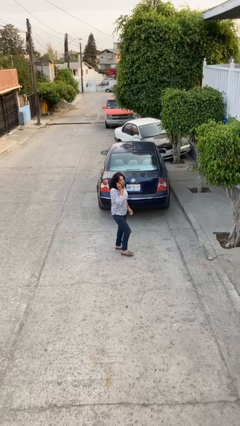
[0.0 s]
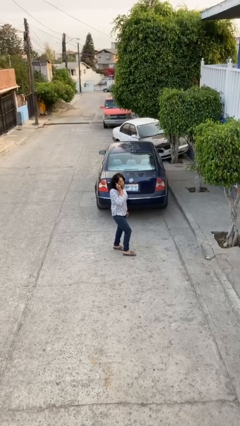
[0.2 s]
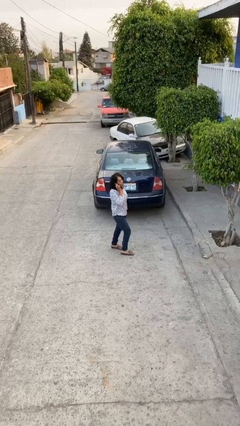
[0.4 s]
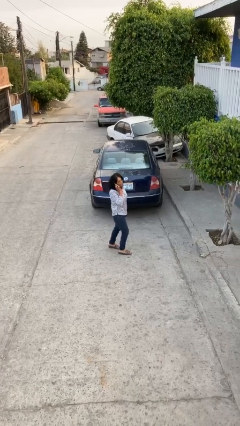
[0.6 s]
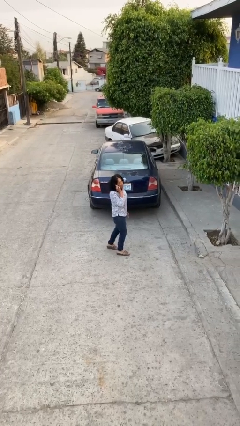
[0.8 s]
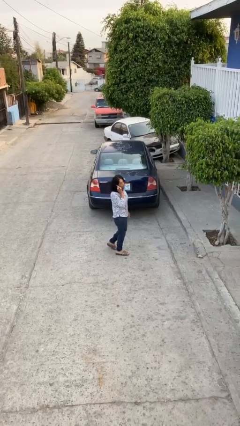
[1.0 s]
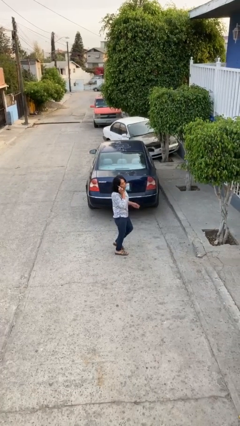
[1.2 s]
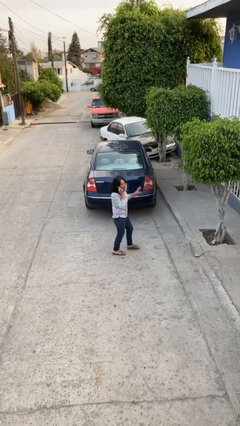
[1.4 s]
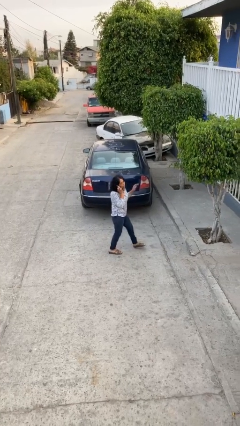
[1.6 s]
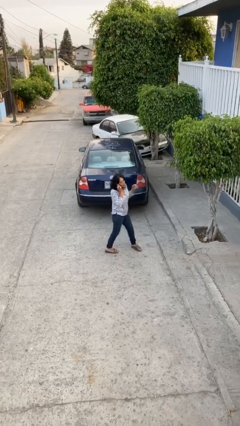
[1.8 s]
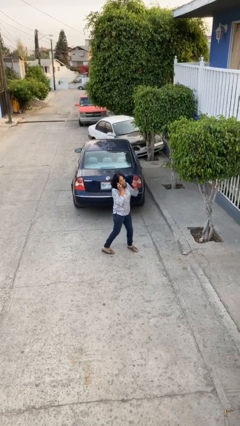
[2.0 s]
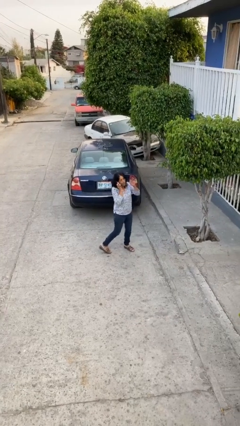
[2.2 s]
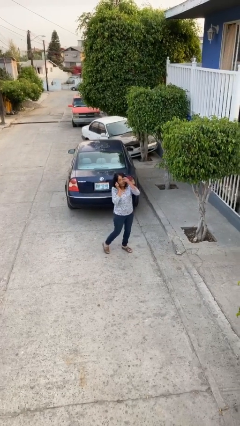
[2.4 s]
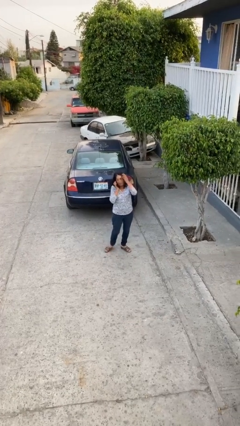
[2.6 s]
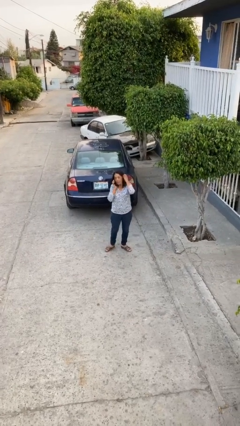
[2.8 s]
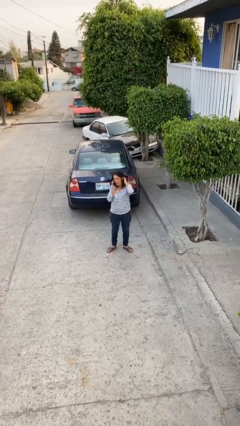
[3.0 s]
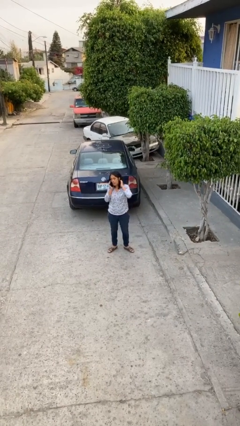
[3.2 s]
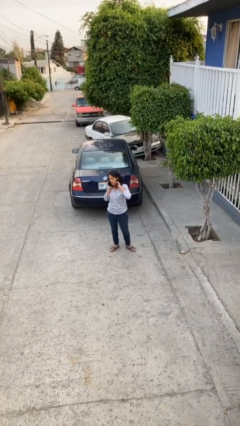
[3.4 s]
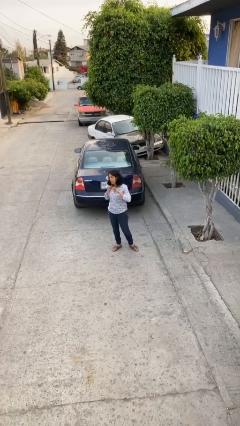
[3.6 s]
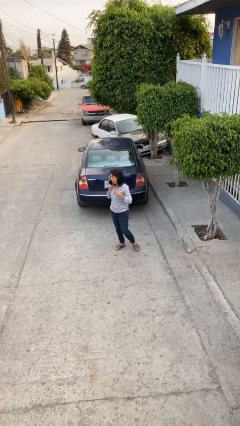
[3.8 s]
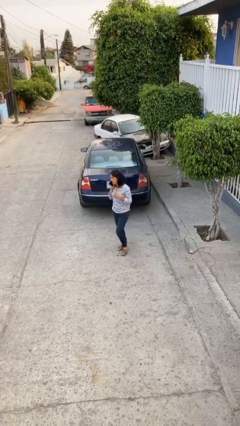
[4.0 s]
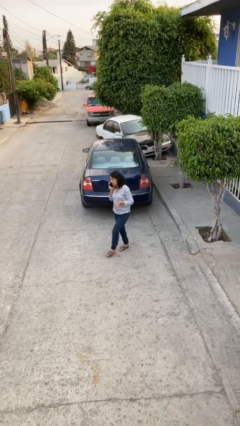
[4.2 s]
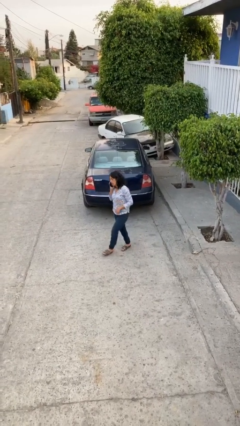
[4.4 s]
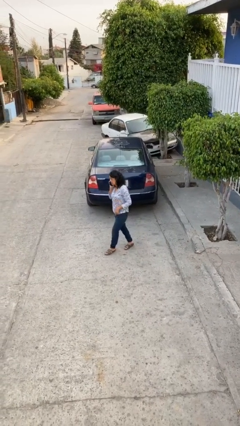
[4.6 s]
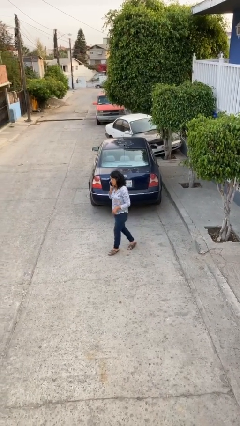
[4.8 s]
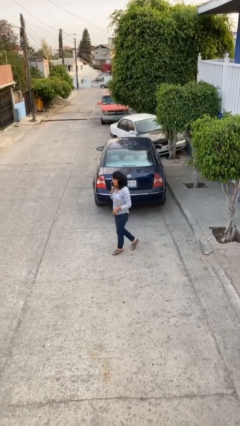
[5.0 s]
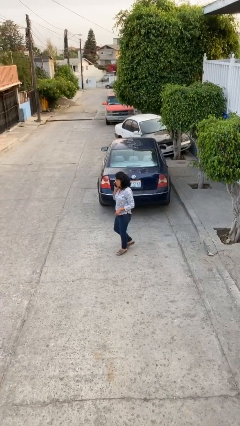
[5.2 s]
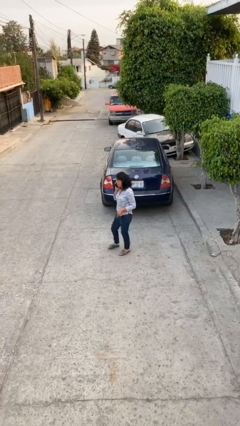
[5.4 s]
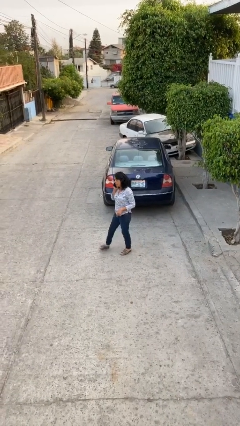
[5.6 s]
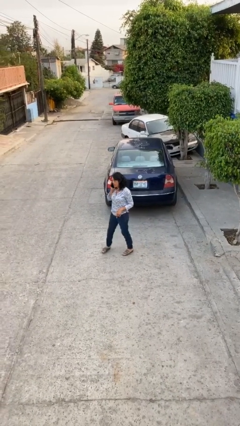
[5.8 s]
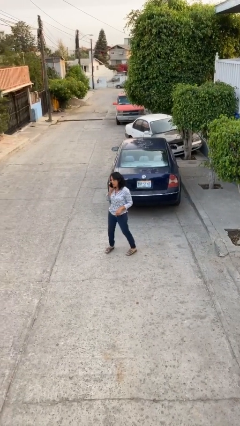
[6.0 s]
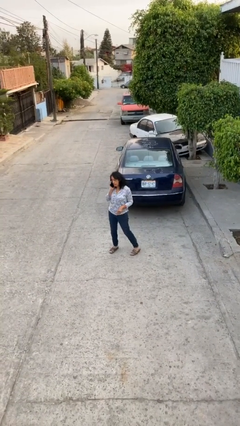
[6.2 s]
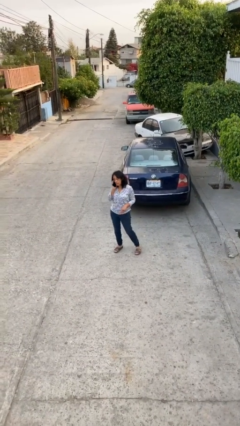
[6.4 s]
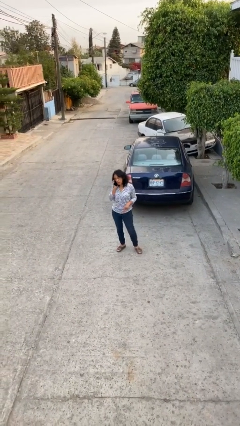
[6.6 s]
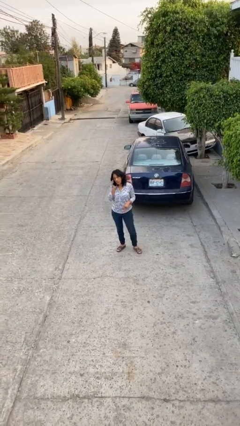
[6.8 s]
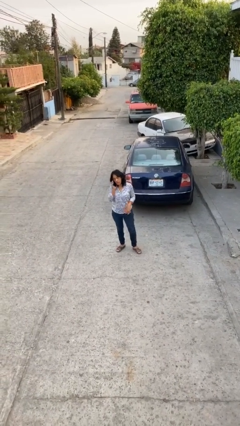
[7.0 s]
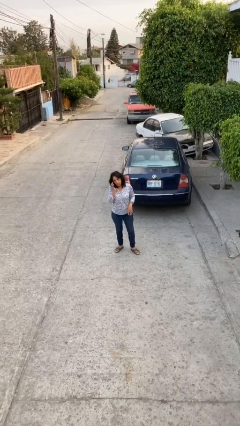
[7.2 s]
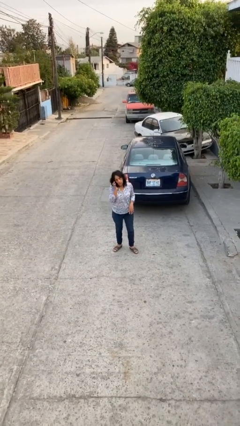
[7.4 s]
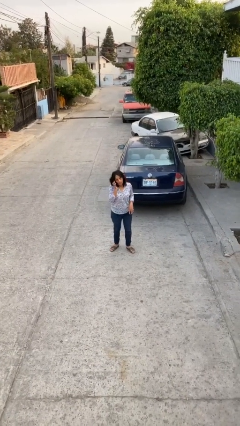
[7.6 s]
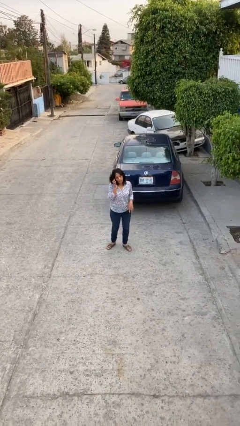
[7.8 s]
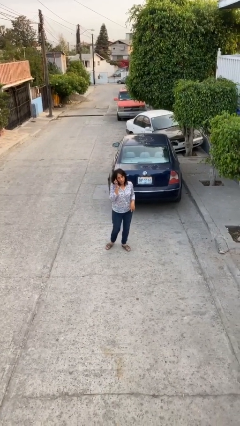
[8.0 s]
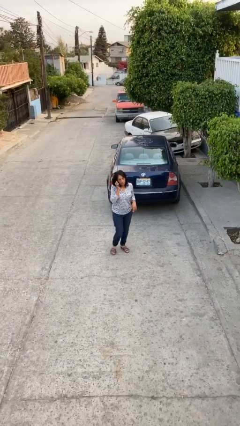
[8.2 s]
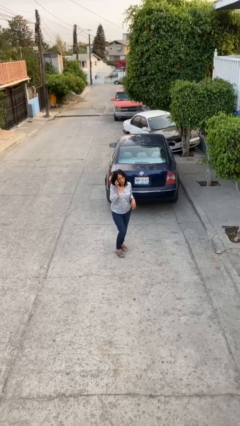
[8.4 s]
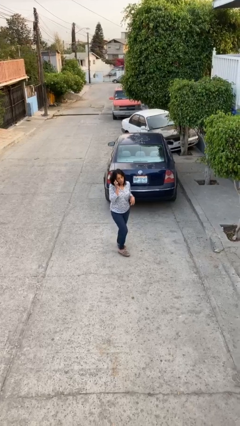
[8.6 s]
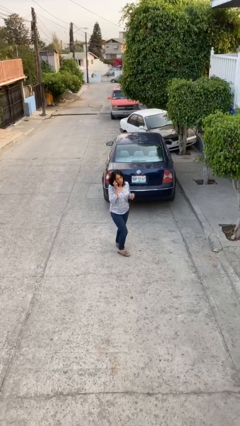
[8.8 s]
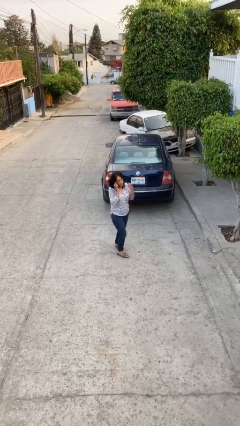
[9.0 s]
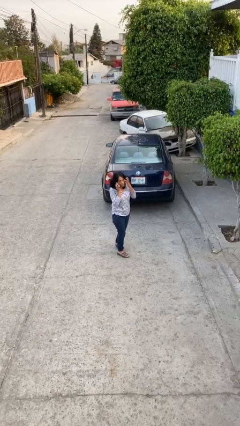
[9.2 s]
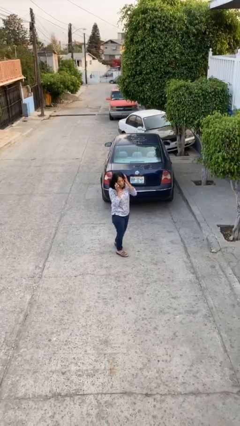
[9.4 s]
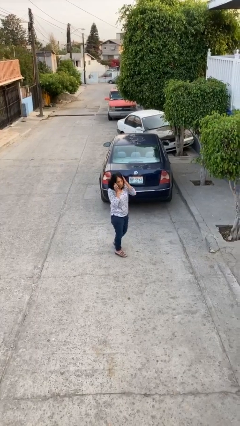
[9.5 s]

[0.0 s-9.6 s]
person talks on phone

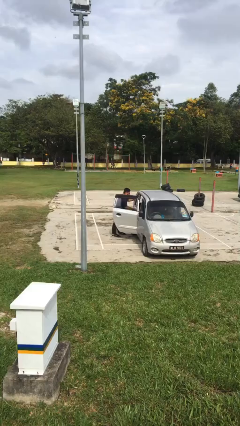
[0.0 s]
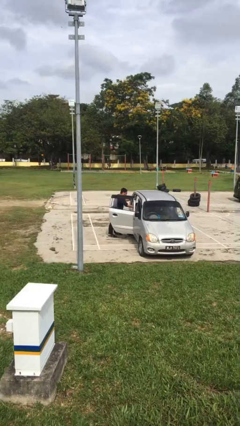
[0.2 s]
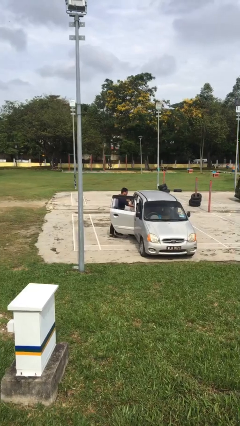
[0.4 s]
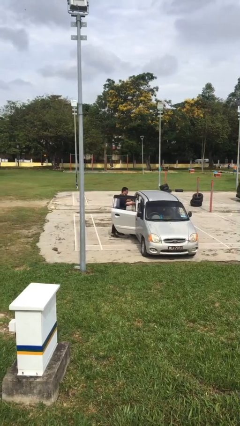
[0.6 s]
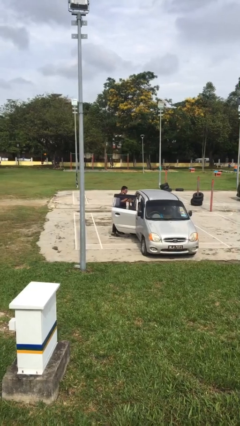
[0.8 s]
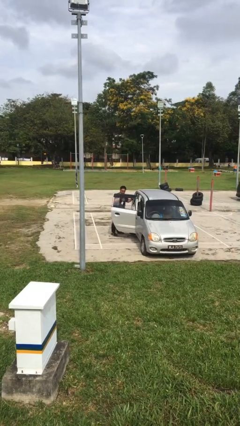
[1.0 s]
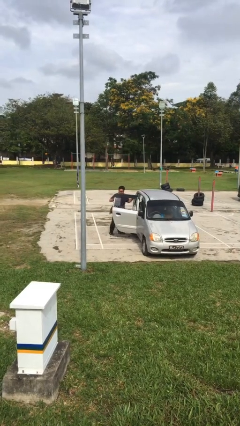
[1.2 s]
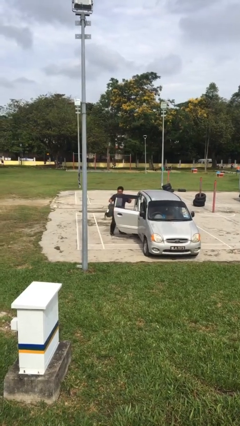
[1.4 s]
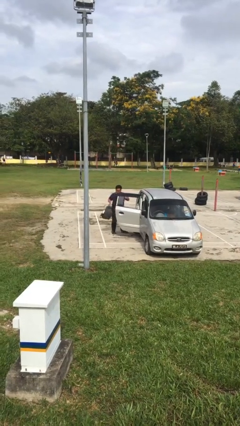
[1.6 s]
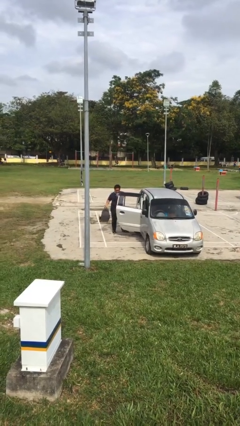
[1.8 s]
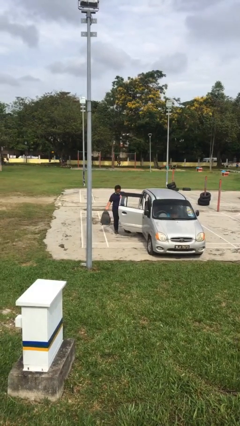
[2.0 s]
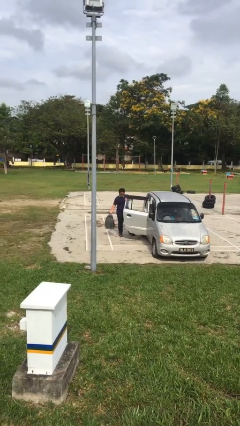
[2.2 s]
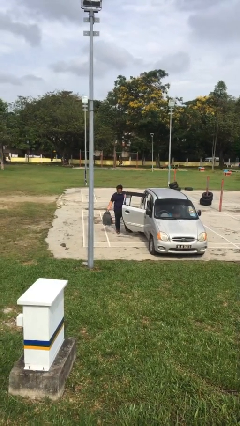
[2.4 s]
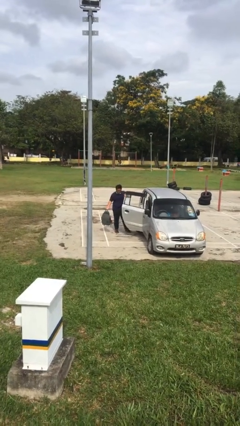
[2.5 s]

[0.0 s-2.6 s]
person unloads car

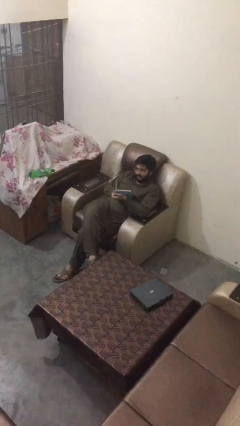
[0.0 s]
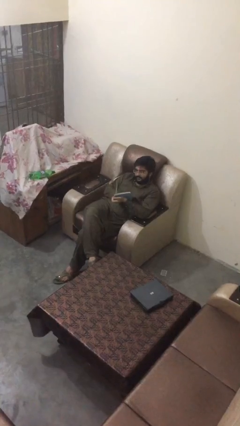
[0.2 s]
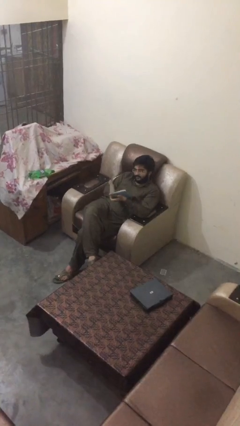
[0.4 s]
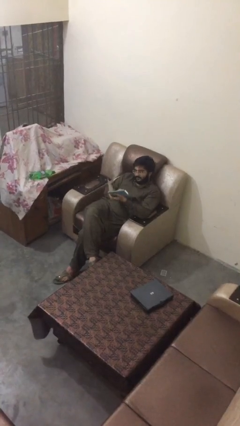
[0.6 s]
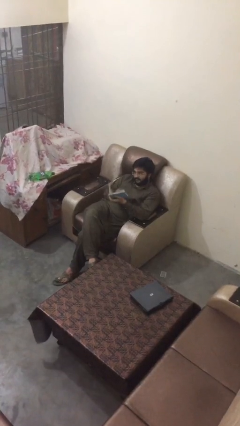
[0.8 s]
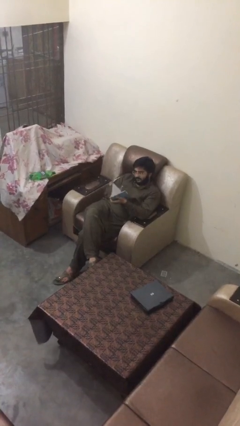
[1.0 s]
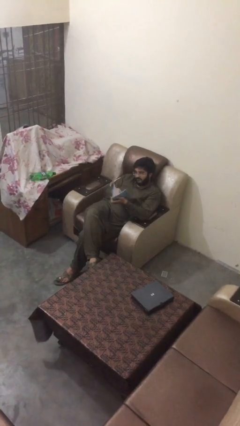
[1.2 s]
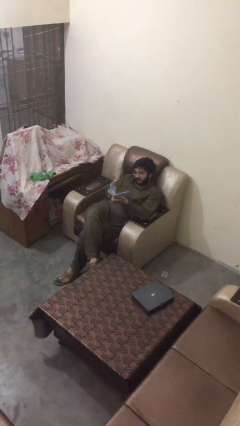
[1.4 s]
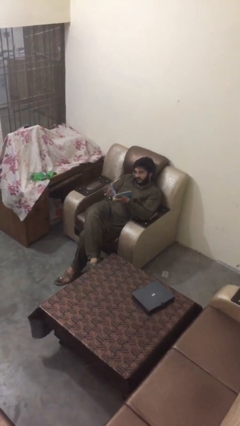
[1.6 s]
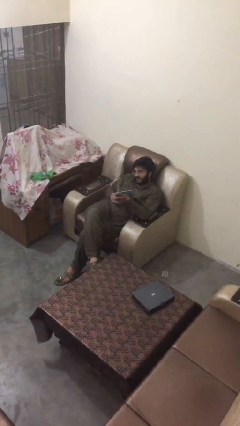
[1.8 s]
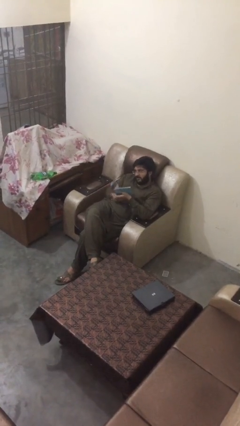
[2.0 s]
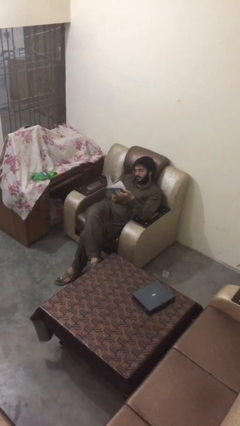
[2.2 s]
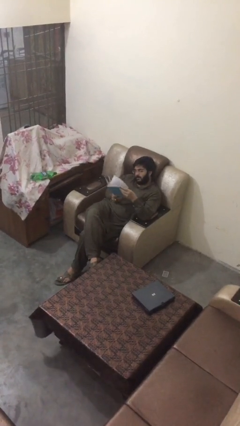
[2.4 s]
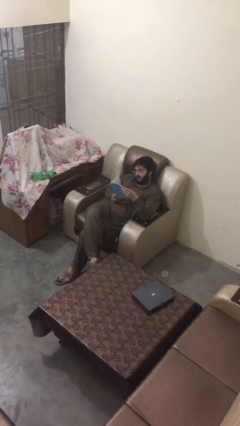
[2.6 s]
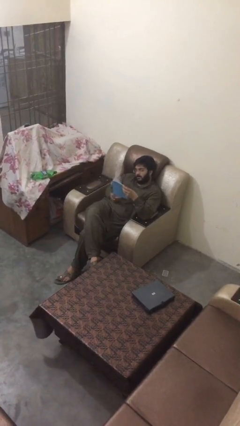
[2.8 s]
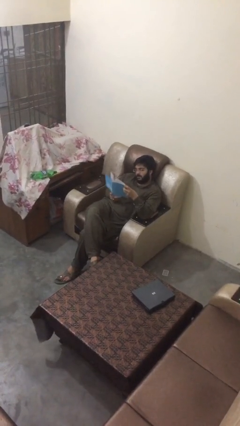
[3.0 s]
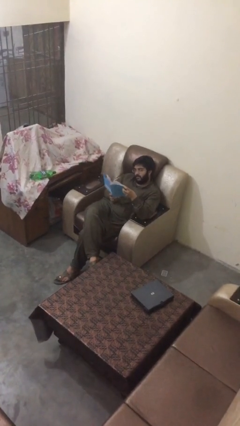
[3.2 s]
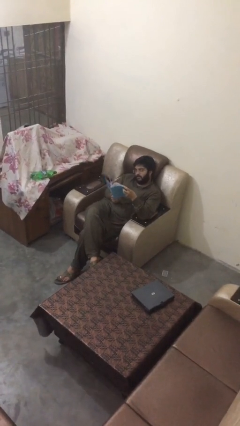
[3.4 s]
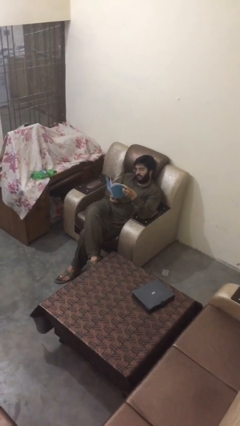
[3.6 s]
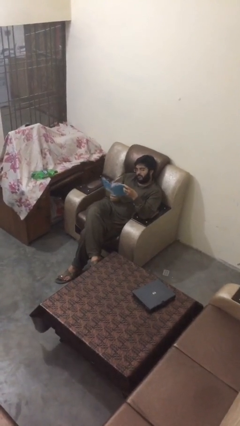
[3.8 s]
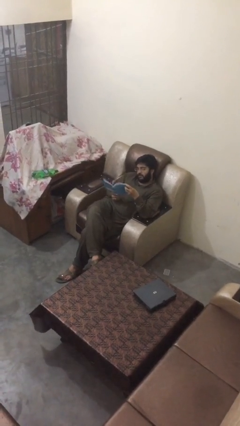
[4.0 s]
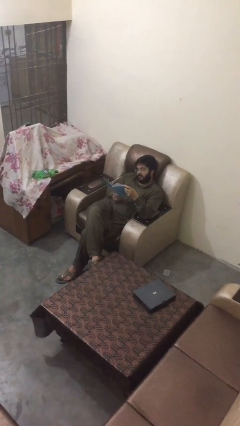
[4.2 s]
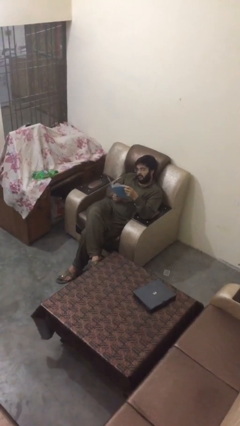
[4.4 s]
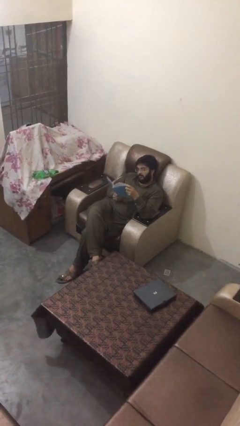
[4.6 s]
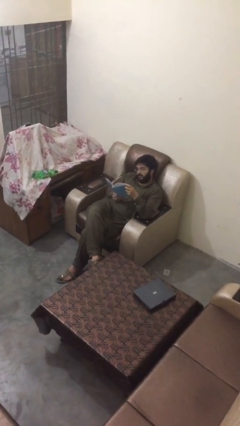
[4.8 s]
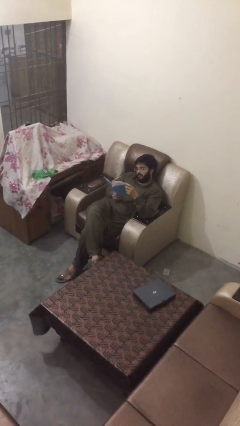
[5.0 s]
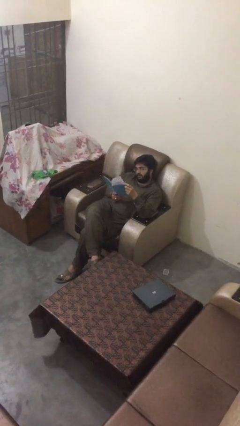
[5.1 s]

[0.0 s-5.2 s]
person reads document

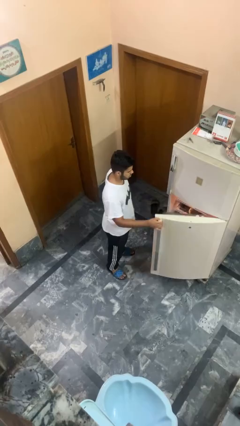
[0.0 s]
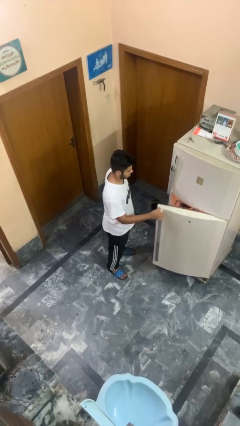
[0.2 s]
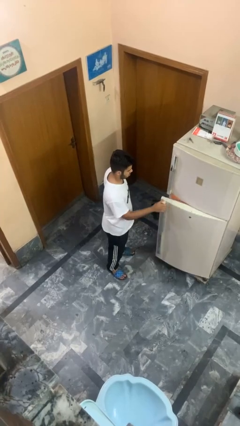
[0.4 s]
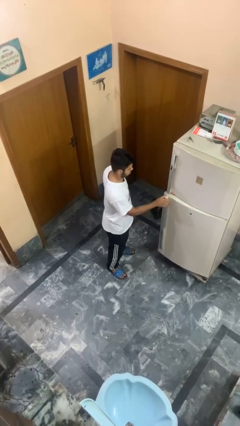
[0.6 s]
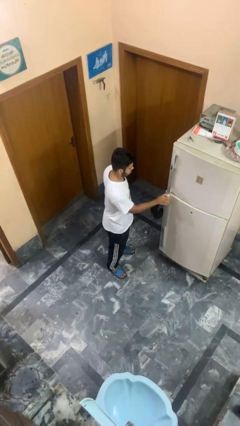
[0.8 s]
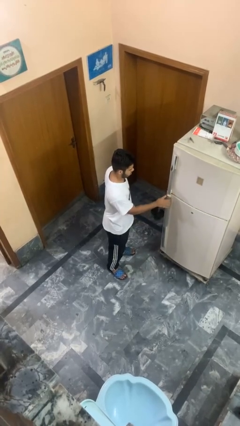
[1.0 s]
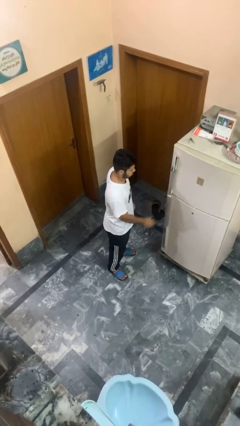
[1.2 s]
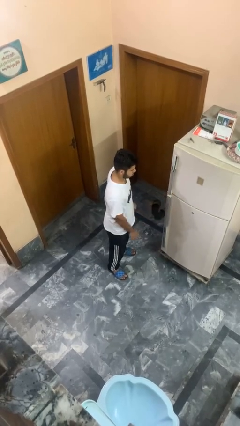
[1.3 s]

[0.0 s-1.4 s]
person closes refrigerator
